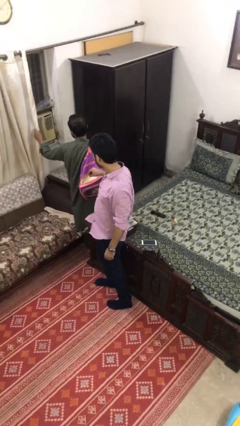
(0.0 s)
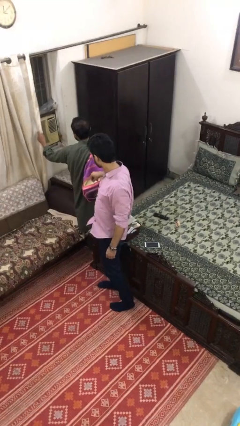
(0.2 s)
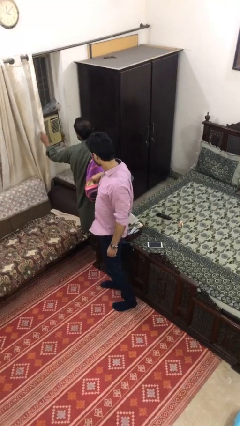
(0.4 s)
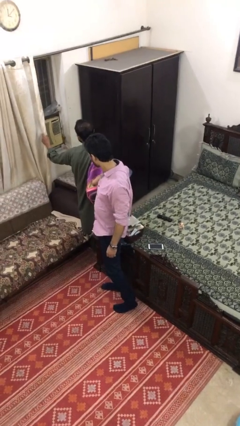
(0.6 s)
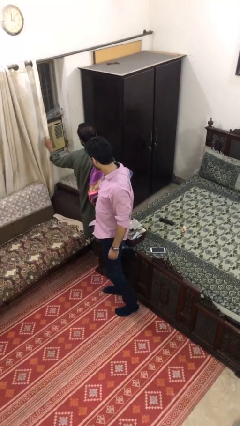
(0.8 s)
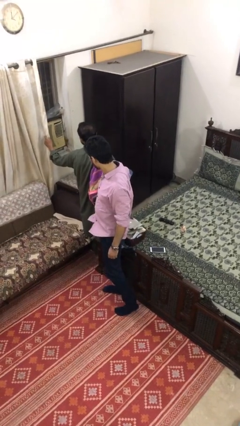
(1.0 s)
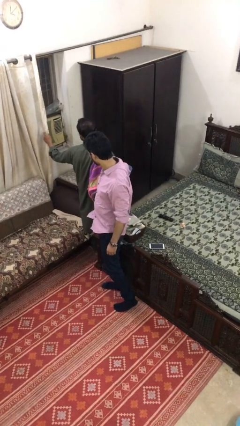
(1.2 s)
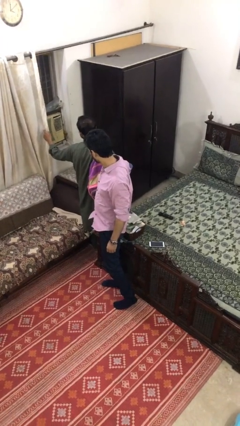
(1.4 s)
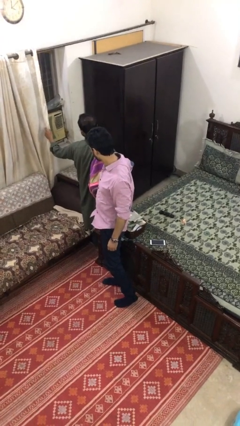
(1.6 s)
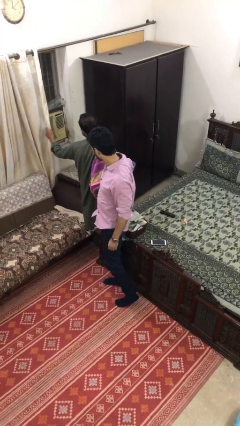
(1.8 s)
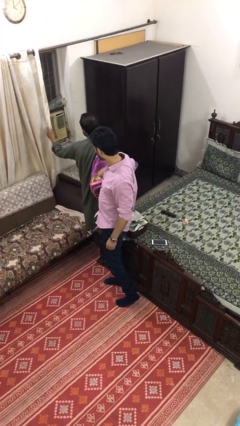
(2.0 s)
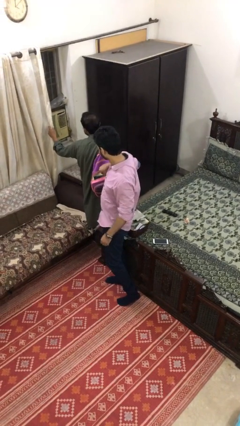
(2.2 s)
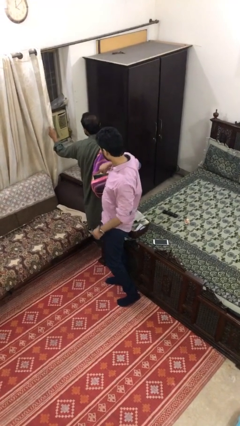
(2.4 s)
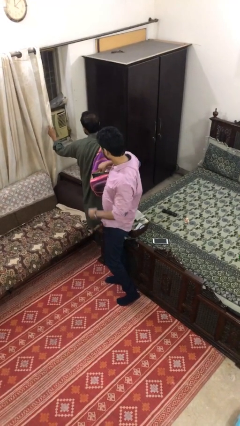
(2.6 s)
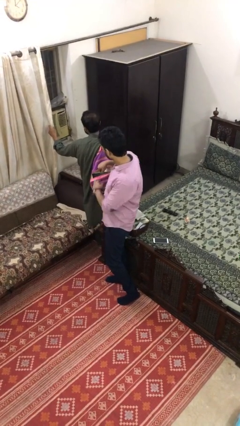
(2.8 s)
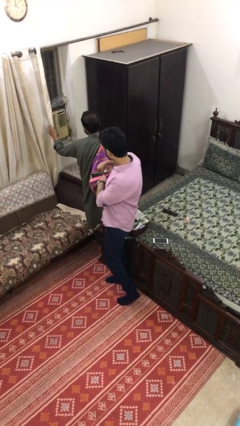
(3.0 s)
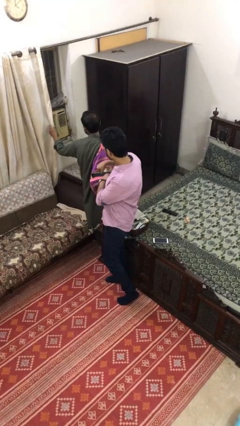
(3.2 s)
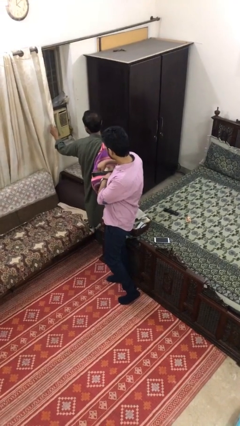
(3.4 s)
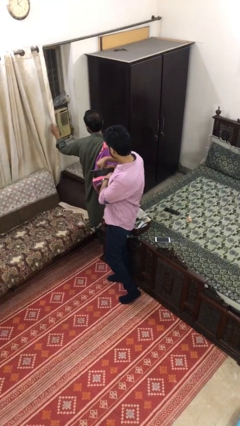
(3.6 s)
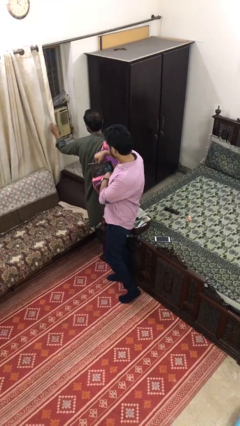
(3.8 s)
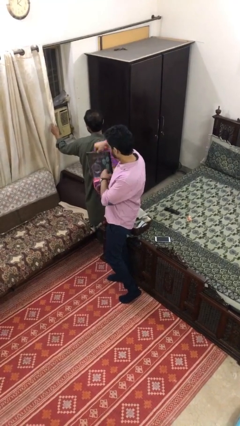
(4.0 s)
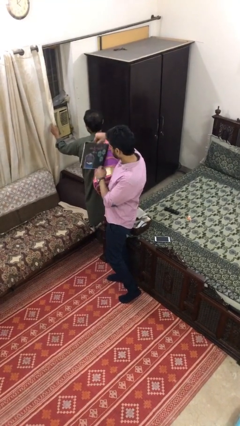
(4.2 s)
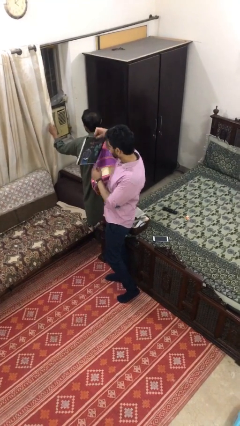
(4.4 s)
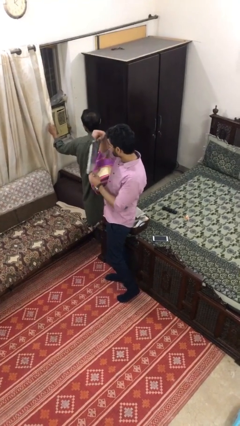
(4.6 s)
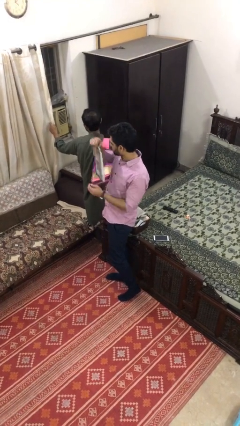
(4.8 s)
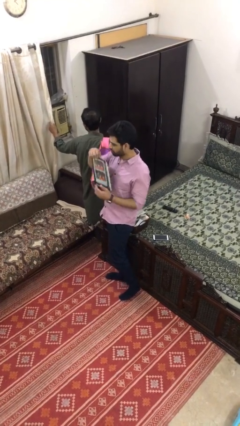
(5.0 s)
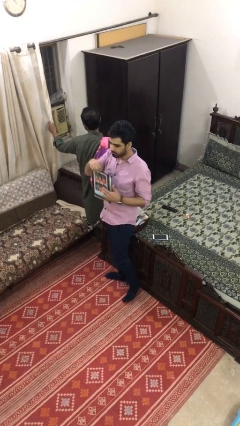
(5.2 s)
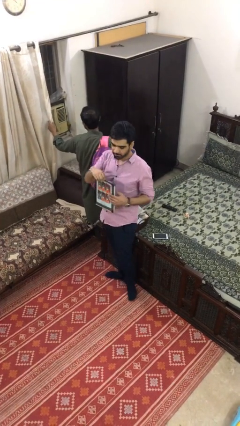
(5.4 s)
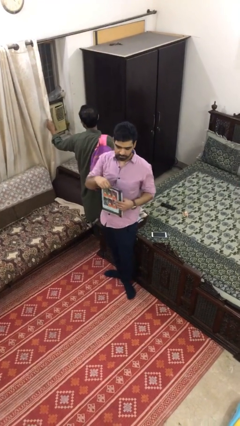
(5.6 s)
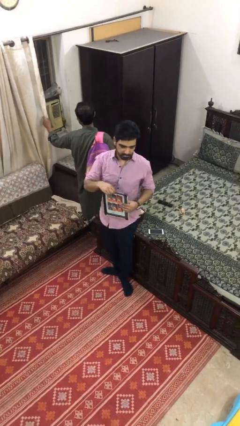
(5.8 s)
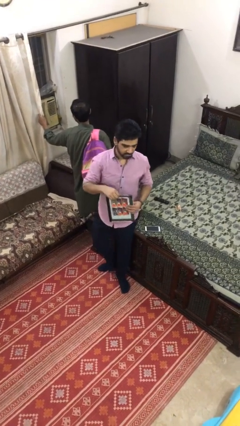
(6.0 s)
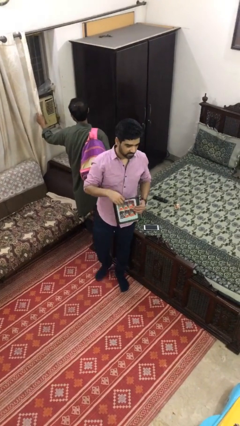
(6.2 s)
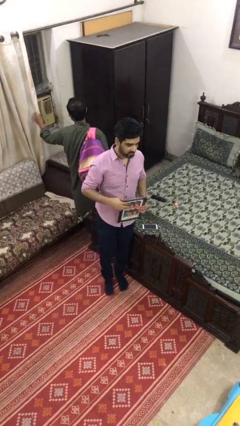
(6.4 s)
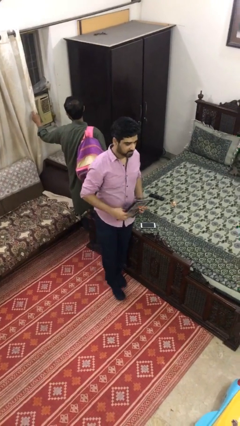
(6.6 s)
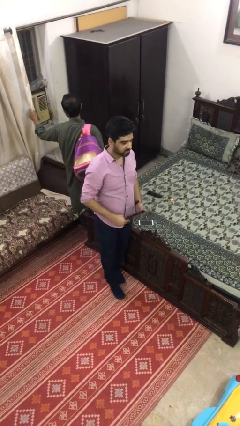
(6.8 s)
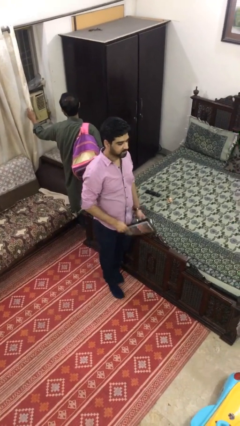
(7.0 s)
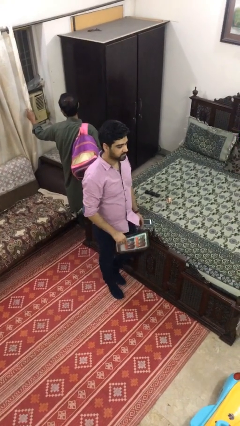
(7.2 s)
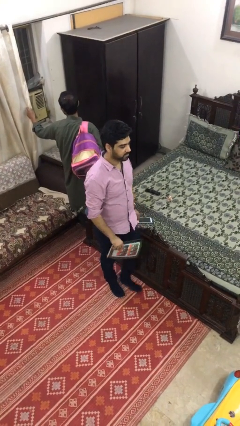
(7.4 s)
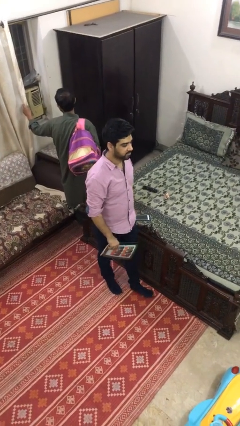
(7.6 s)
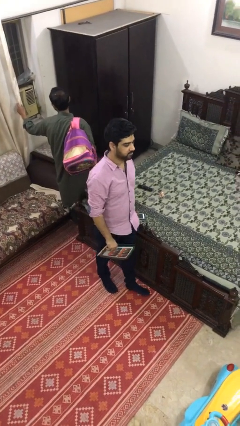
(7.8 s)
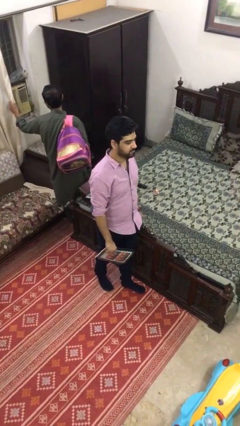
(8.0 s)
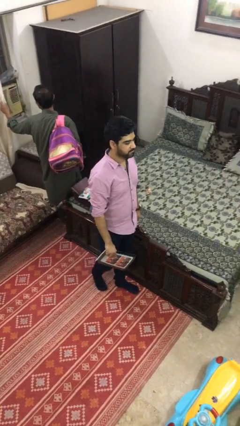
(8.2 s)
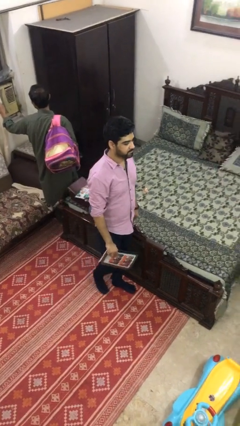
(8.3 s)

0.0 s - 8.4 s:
person steals object from person

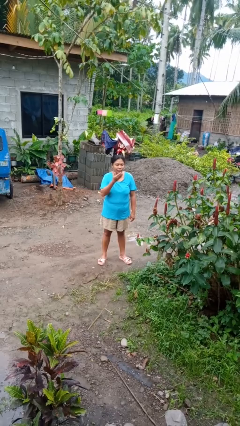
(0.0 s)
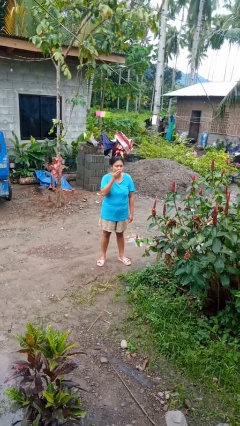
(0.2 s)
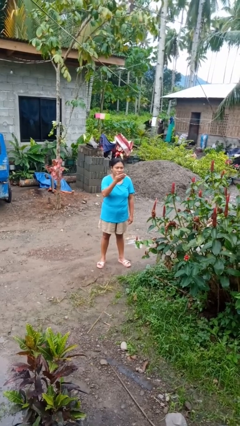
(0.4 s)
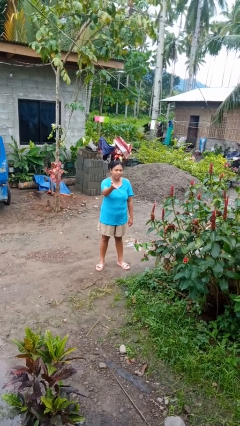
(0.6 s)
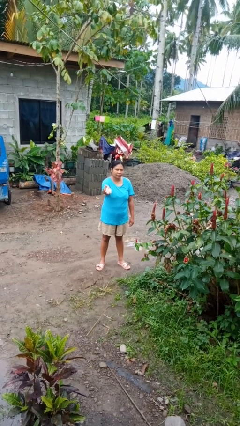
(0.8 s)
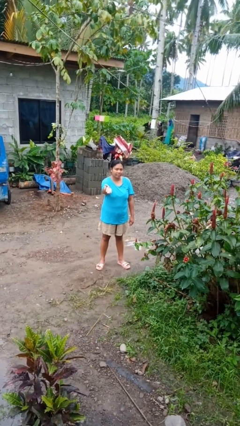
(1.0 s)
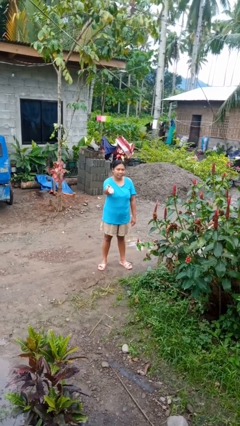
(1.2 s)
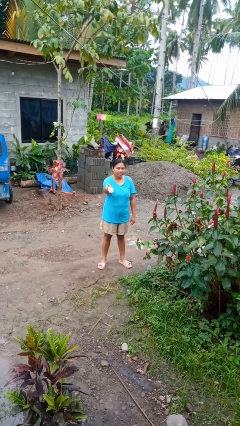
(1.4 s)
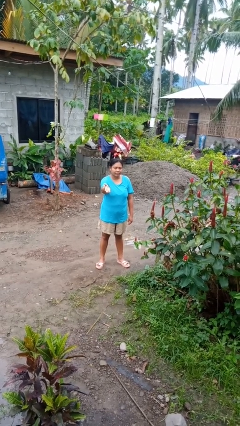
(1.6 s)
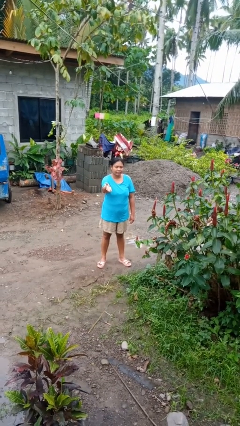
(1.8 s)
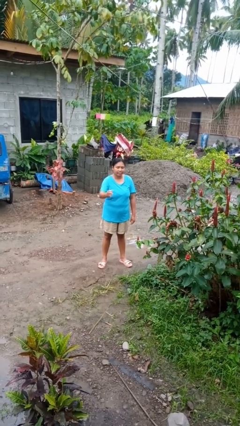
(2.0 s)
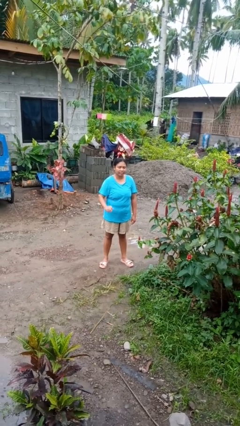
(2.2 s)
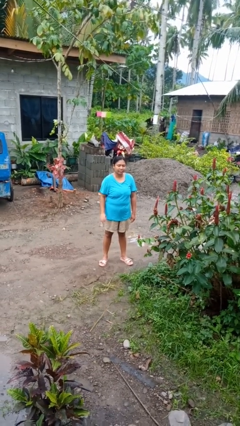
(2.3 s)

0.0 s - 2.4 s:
person gestures blow kiss

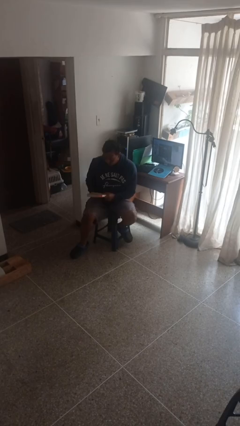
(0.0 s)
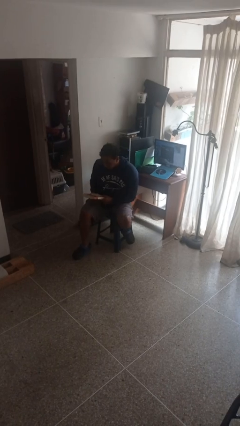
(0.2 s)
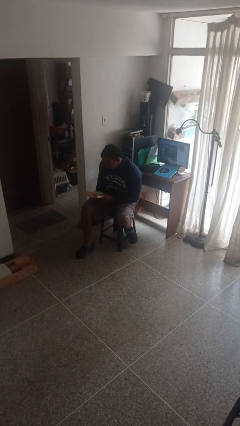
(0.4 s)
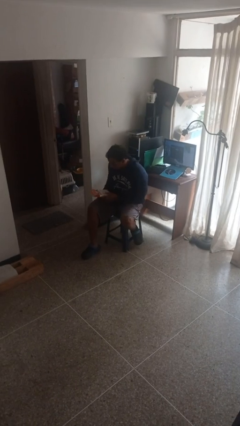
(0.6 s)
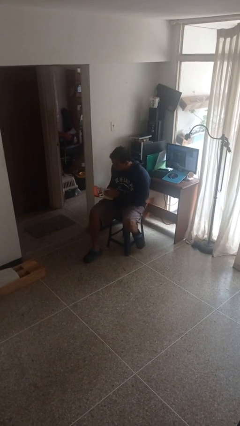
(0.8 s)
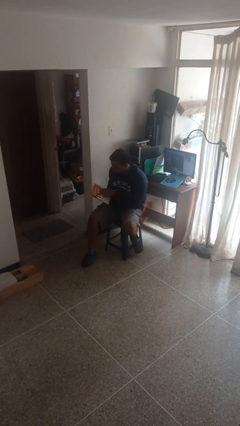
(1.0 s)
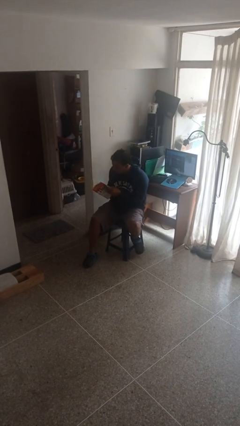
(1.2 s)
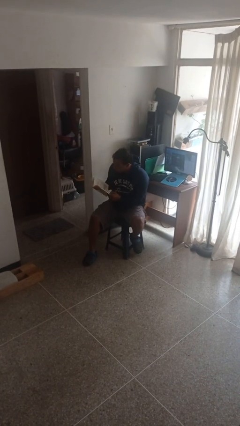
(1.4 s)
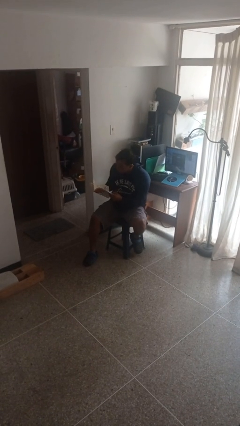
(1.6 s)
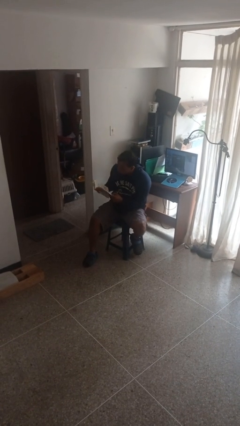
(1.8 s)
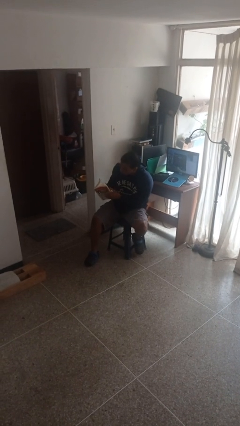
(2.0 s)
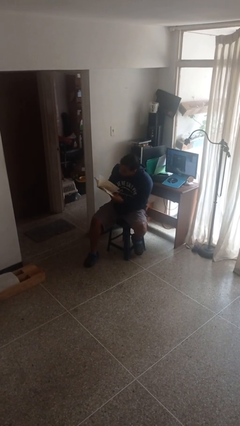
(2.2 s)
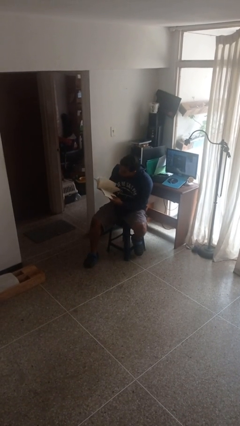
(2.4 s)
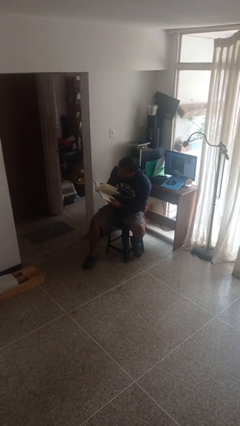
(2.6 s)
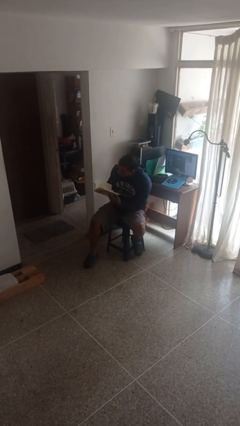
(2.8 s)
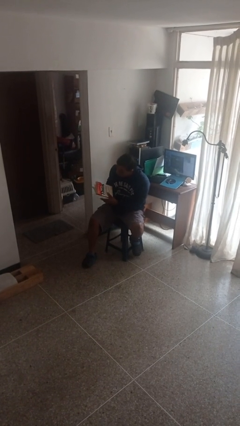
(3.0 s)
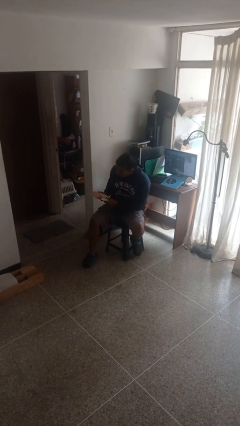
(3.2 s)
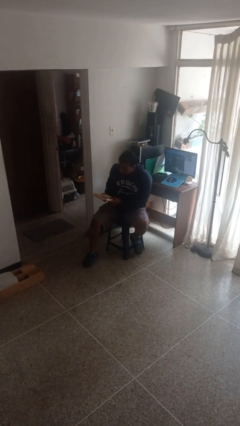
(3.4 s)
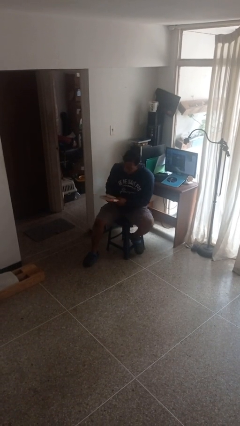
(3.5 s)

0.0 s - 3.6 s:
person reads book

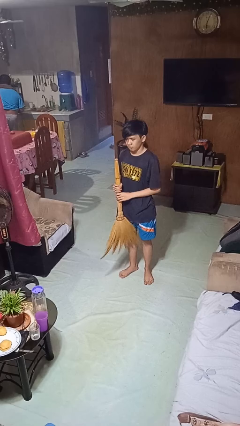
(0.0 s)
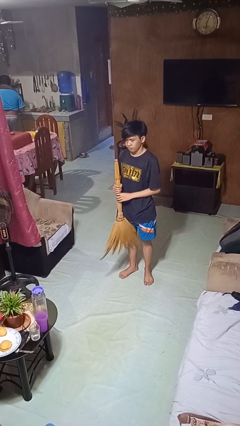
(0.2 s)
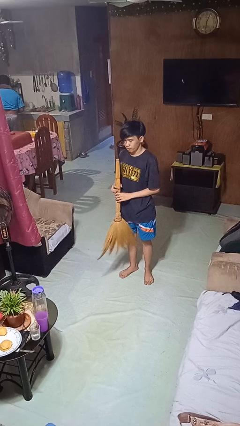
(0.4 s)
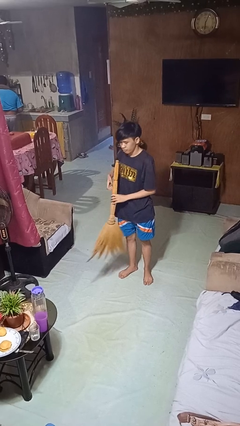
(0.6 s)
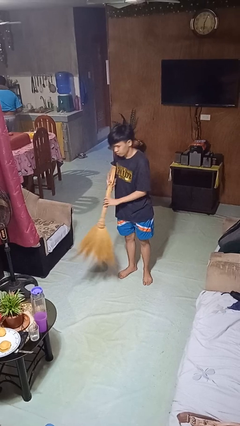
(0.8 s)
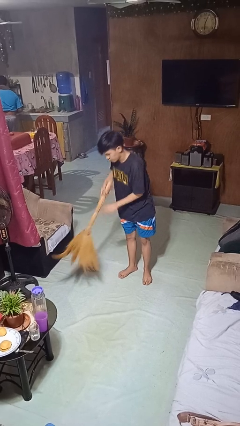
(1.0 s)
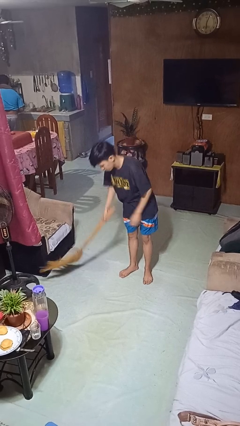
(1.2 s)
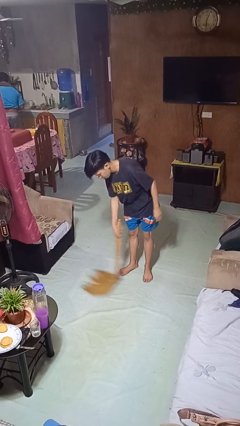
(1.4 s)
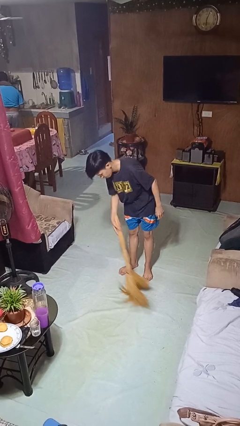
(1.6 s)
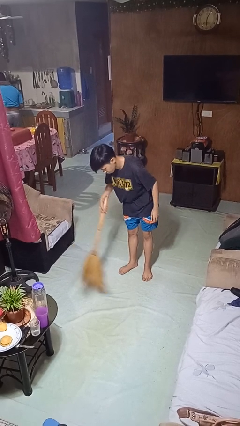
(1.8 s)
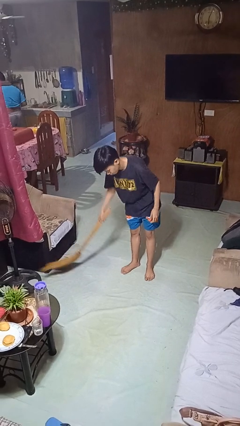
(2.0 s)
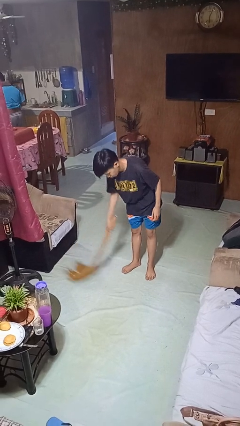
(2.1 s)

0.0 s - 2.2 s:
person sweeps floor

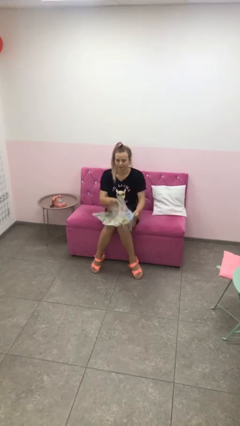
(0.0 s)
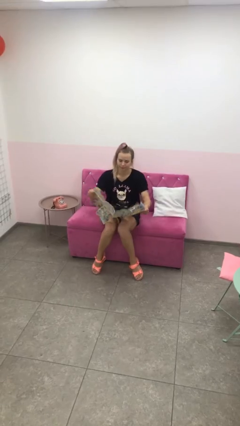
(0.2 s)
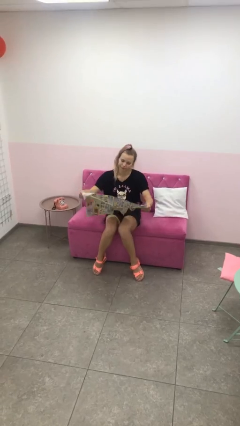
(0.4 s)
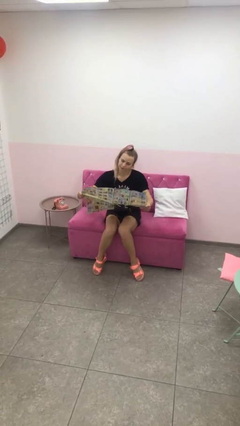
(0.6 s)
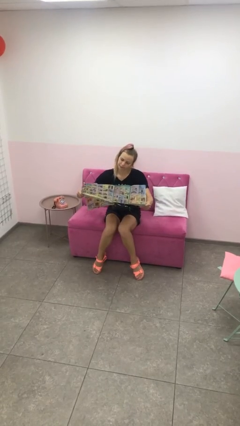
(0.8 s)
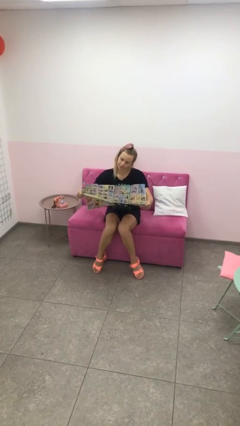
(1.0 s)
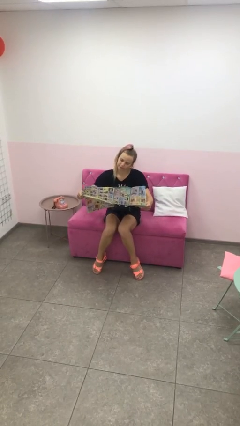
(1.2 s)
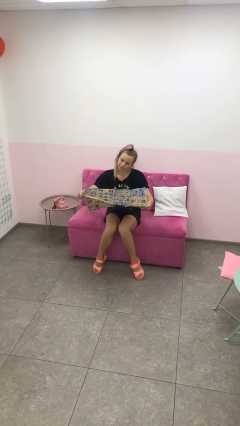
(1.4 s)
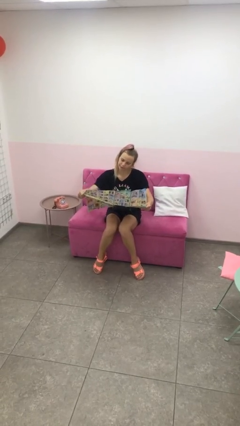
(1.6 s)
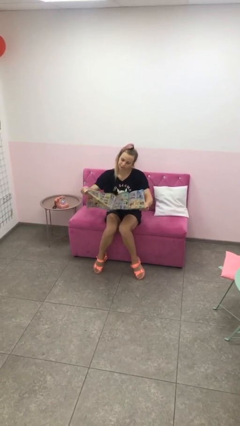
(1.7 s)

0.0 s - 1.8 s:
person reads newspaper
